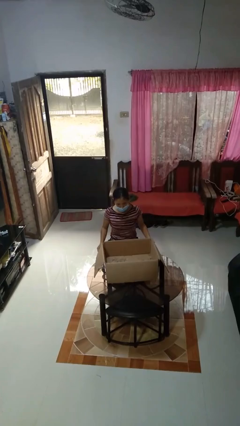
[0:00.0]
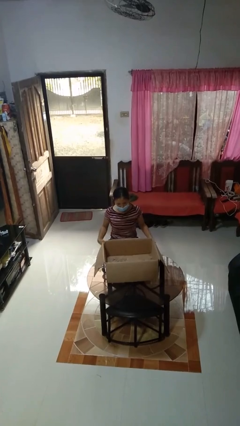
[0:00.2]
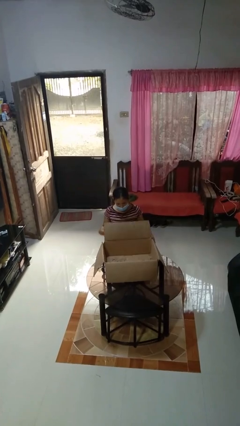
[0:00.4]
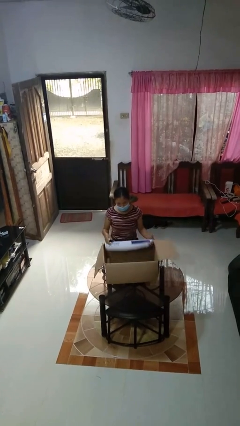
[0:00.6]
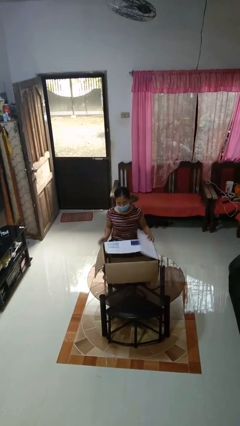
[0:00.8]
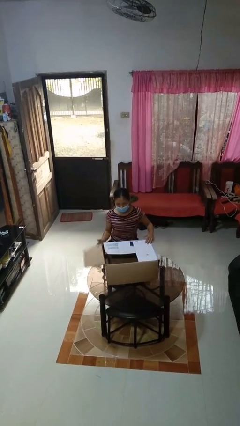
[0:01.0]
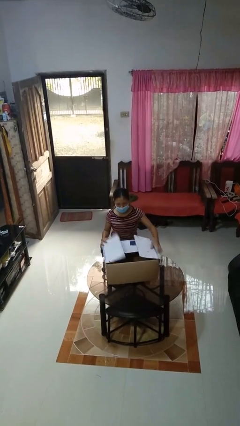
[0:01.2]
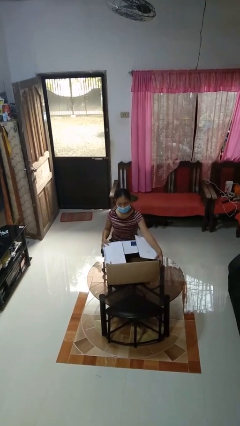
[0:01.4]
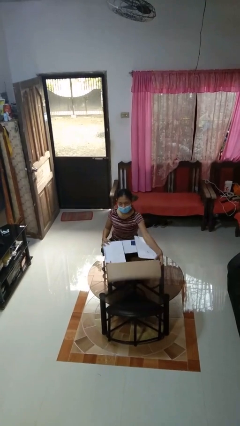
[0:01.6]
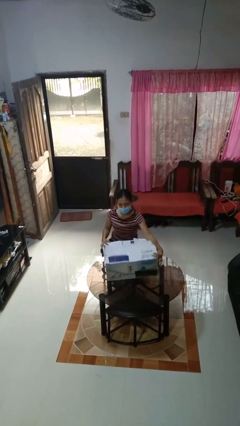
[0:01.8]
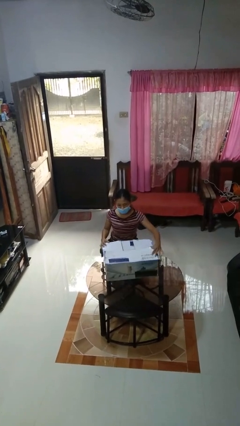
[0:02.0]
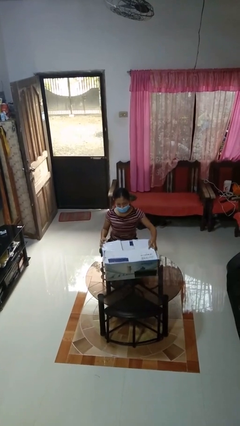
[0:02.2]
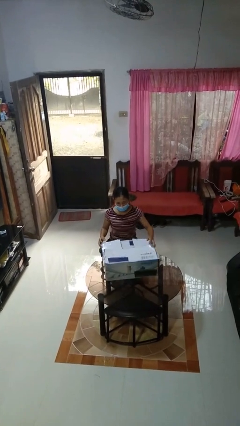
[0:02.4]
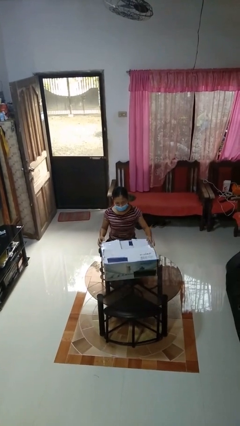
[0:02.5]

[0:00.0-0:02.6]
person closes box

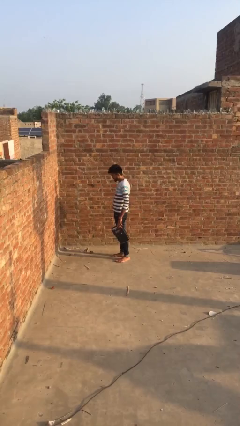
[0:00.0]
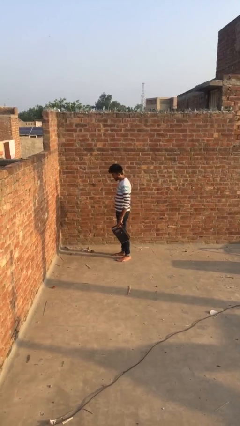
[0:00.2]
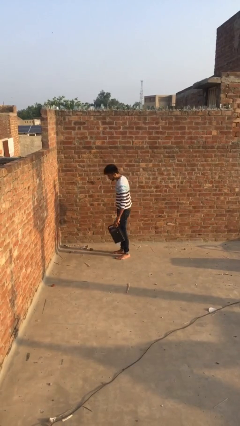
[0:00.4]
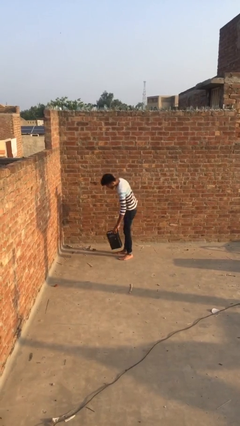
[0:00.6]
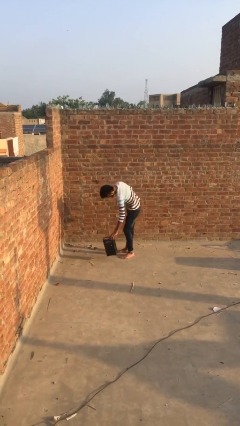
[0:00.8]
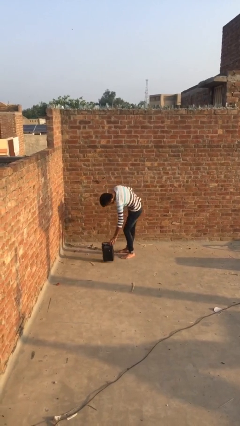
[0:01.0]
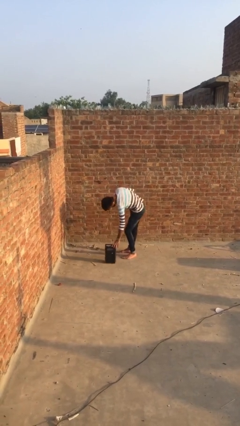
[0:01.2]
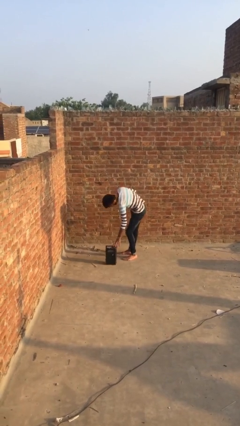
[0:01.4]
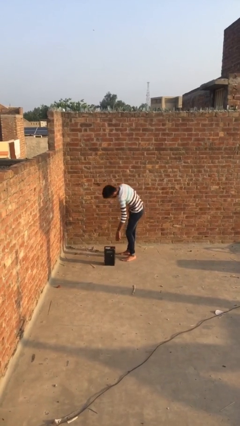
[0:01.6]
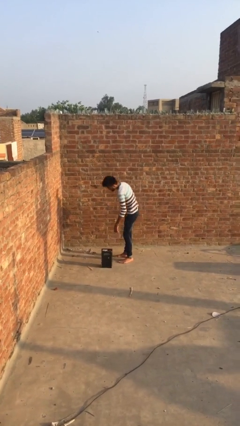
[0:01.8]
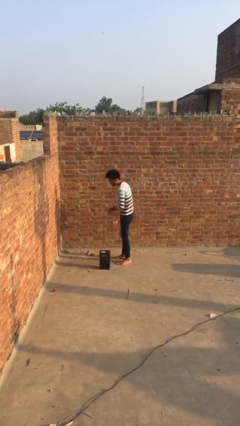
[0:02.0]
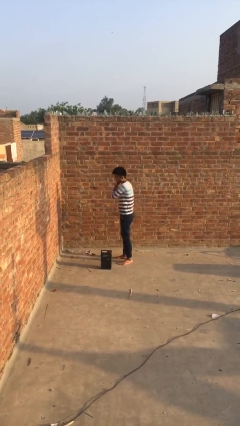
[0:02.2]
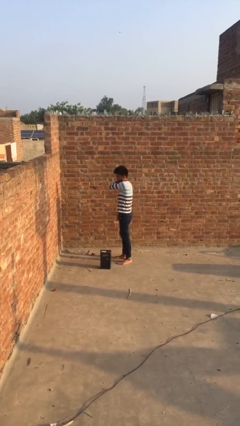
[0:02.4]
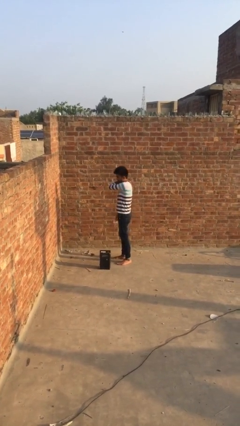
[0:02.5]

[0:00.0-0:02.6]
person puts down object on floor

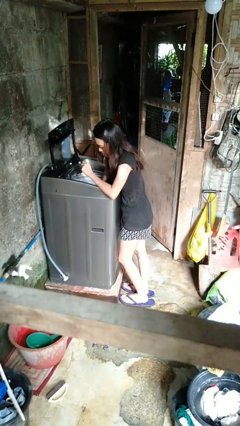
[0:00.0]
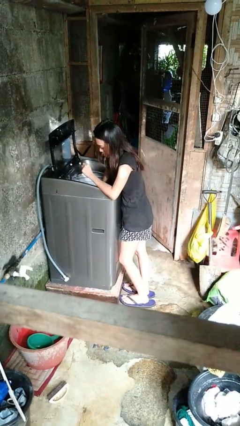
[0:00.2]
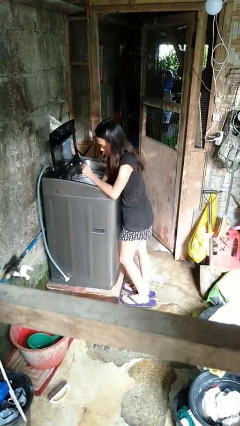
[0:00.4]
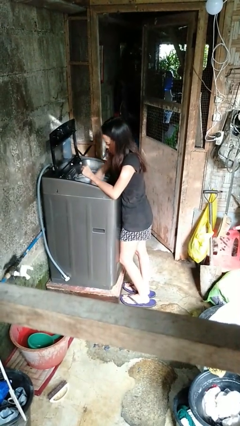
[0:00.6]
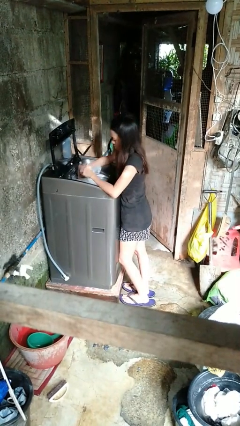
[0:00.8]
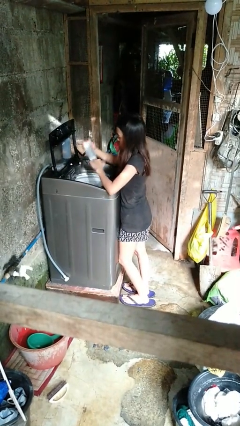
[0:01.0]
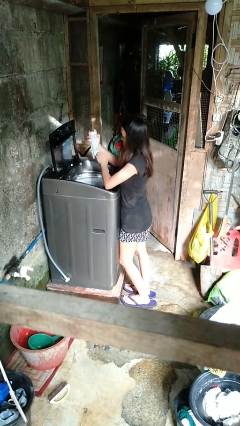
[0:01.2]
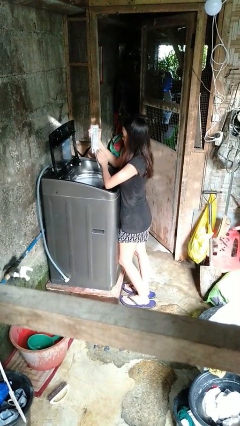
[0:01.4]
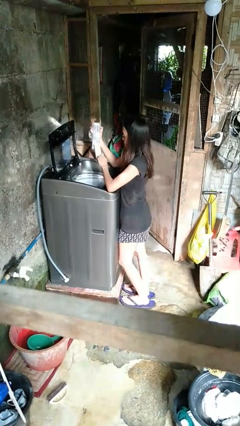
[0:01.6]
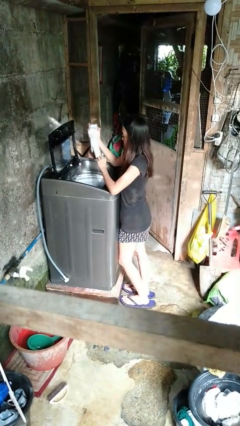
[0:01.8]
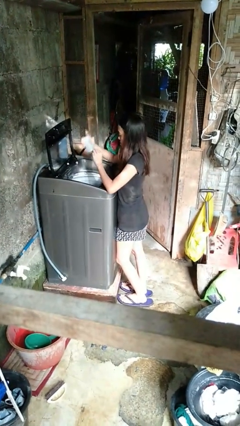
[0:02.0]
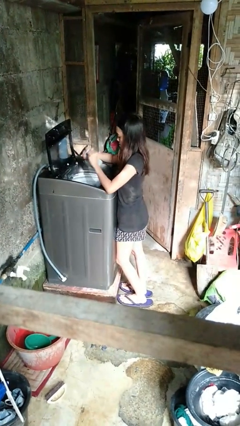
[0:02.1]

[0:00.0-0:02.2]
person cleans dryer lint trap

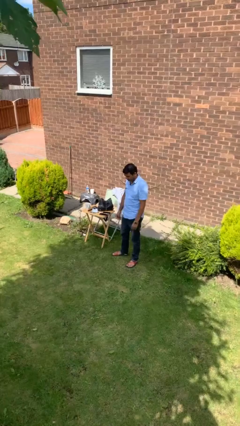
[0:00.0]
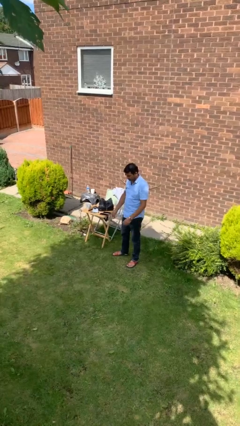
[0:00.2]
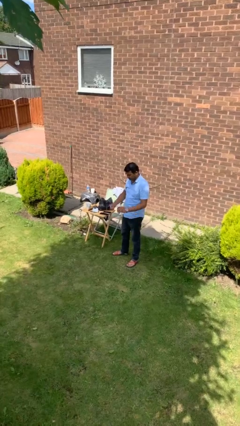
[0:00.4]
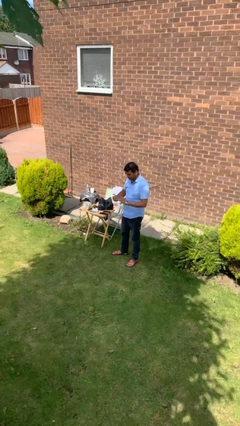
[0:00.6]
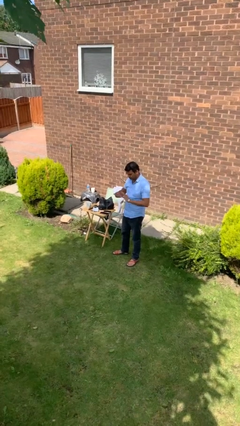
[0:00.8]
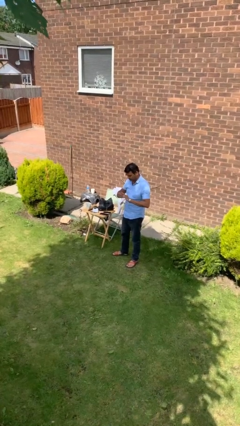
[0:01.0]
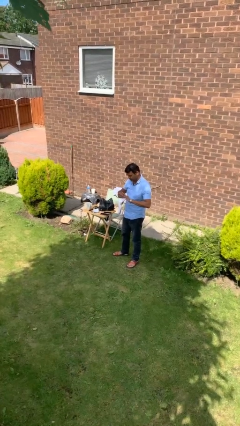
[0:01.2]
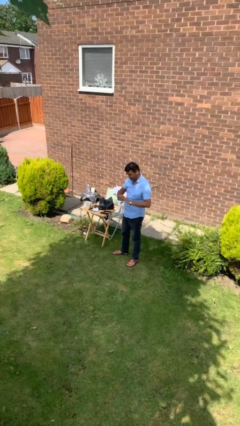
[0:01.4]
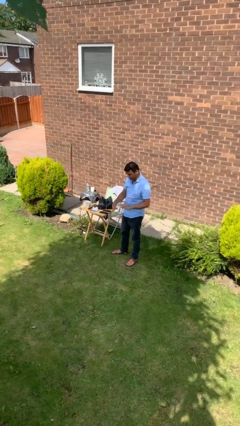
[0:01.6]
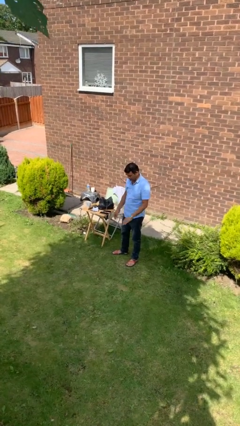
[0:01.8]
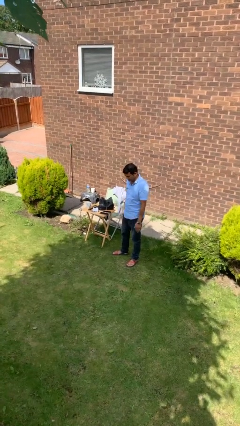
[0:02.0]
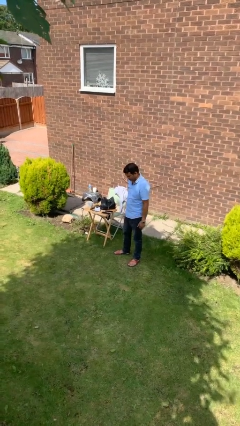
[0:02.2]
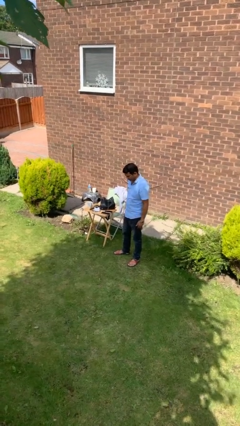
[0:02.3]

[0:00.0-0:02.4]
person puts on ring

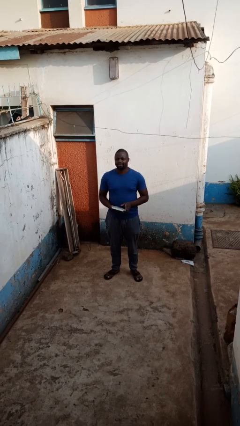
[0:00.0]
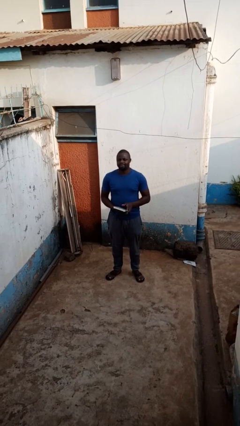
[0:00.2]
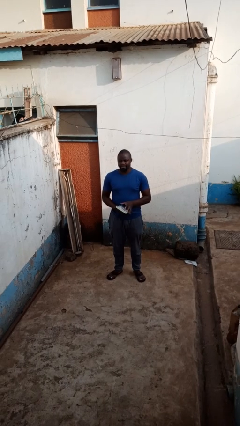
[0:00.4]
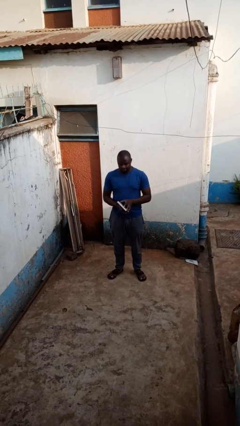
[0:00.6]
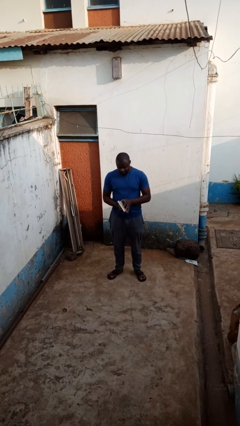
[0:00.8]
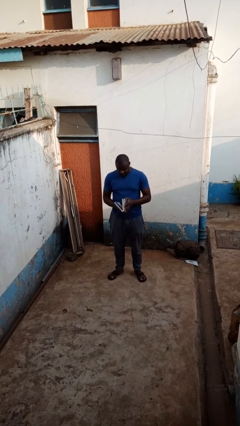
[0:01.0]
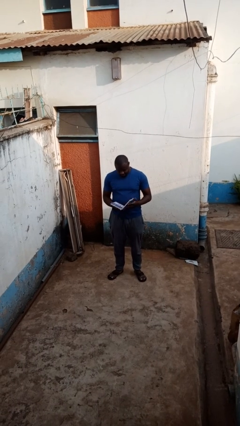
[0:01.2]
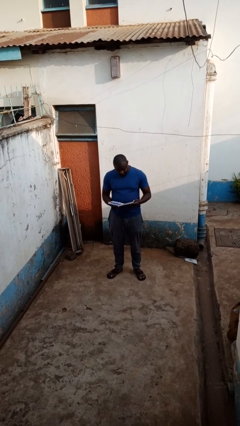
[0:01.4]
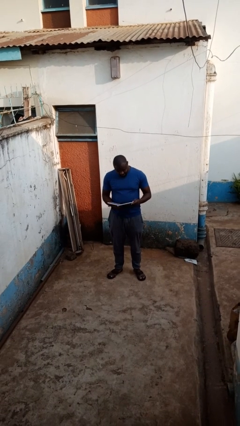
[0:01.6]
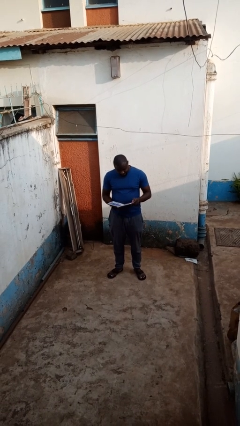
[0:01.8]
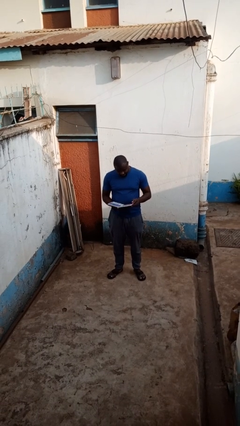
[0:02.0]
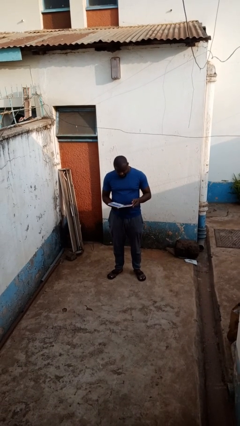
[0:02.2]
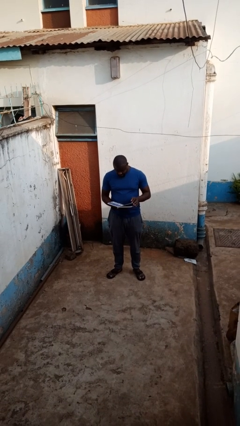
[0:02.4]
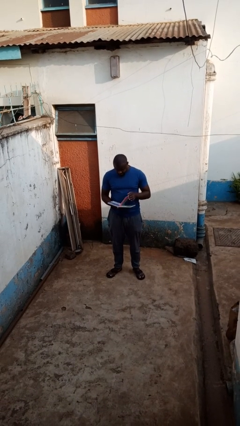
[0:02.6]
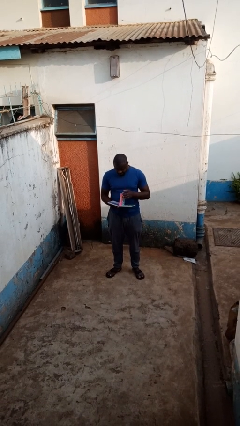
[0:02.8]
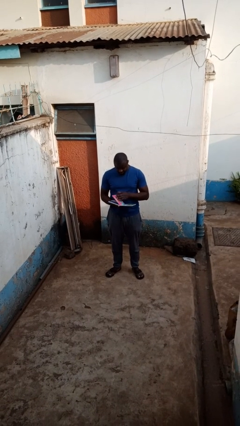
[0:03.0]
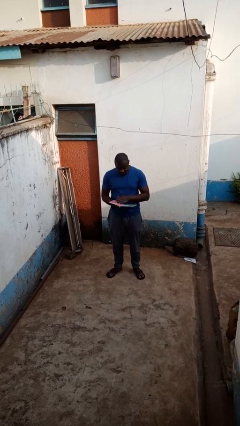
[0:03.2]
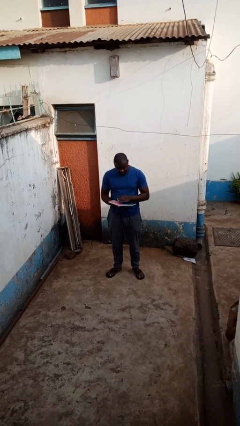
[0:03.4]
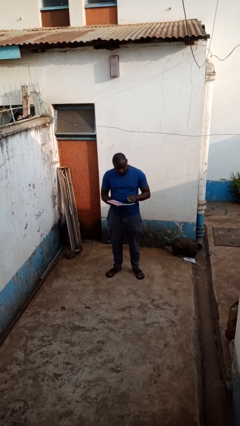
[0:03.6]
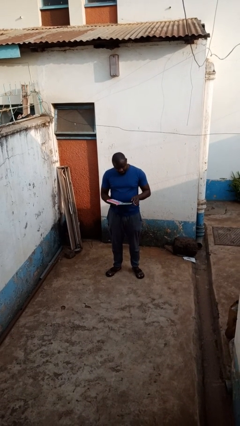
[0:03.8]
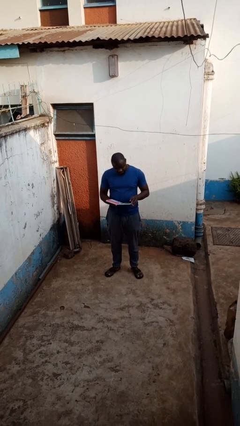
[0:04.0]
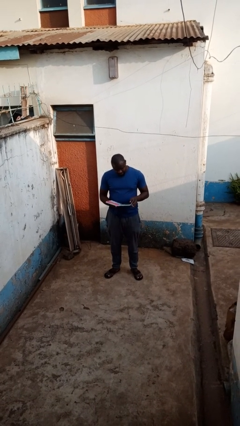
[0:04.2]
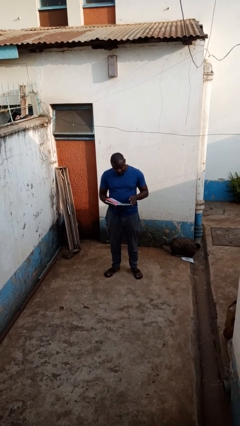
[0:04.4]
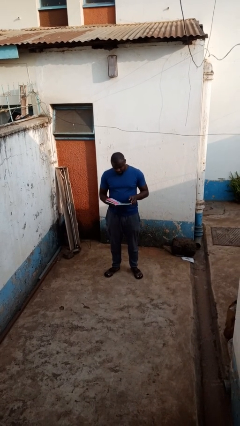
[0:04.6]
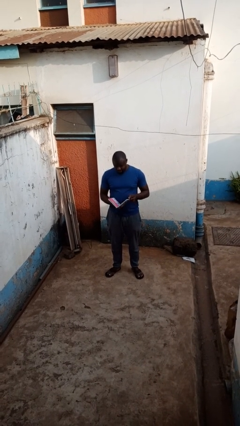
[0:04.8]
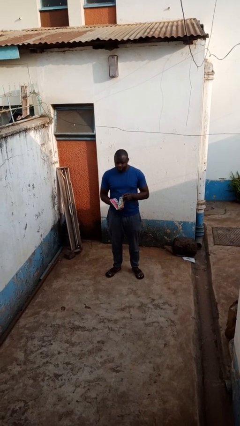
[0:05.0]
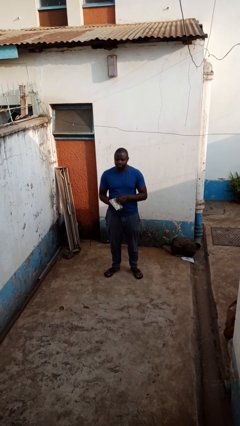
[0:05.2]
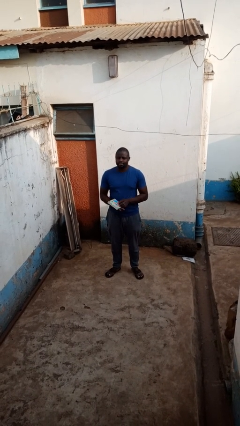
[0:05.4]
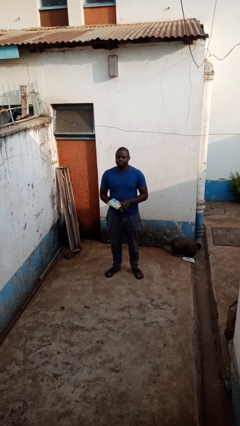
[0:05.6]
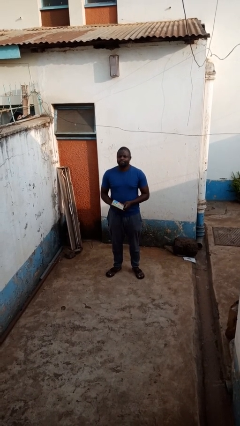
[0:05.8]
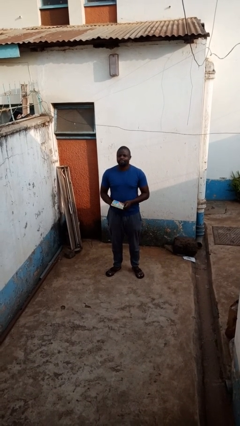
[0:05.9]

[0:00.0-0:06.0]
person reads book

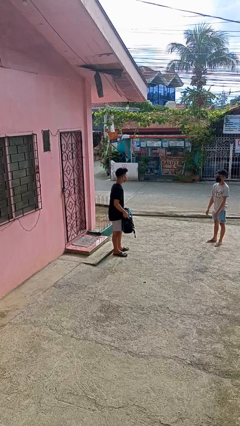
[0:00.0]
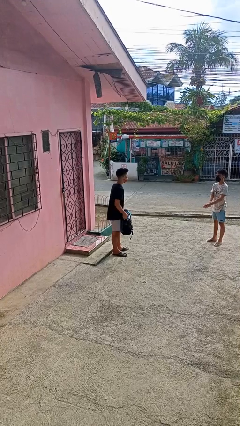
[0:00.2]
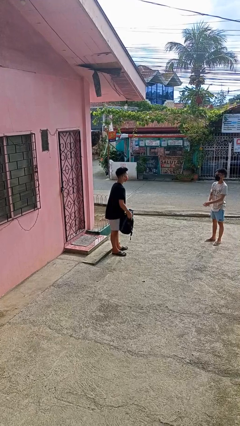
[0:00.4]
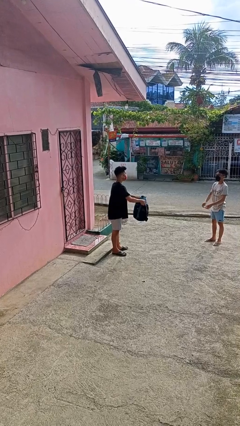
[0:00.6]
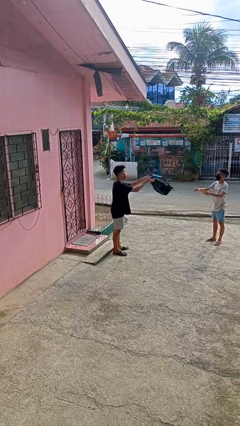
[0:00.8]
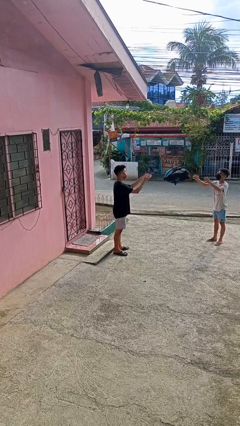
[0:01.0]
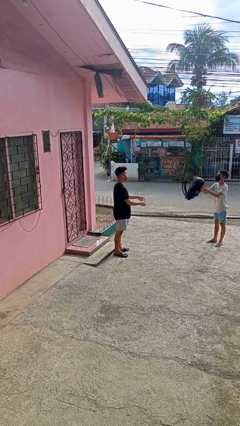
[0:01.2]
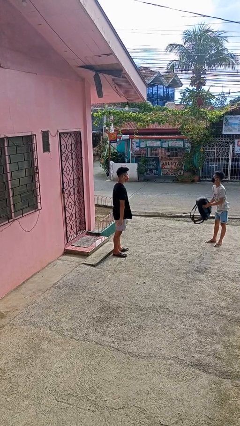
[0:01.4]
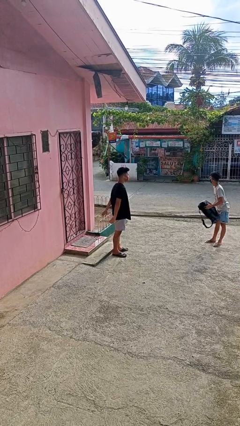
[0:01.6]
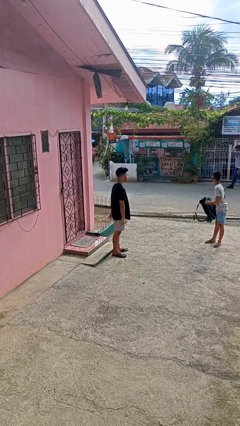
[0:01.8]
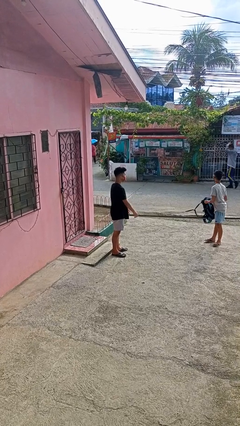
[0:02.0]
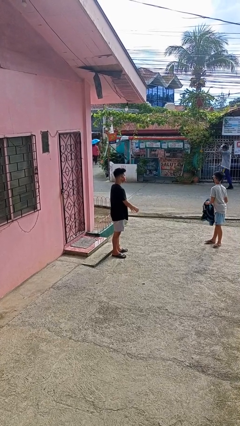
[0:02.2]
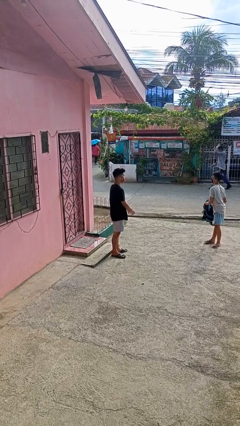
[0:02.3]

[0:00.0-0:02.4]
person throws object to person
